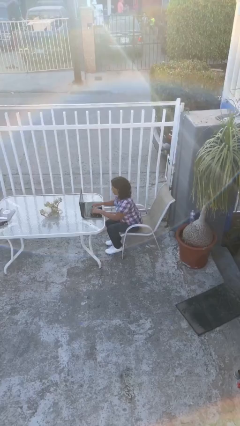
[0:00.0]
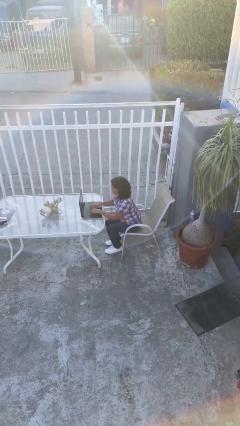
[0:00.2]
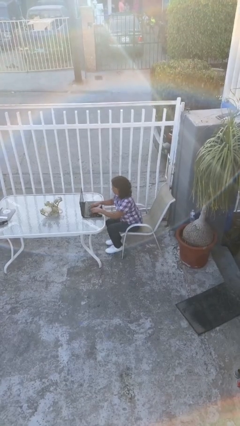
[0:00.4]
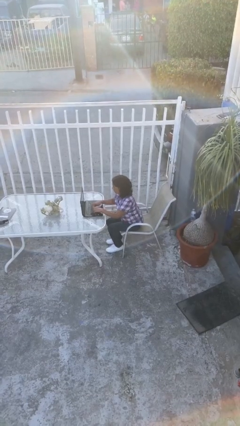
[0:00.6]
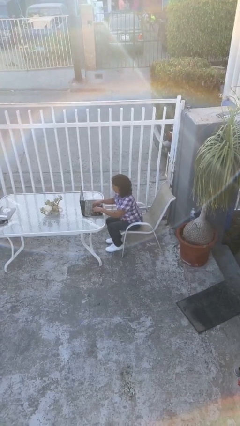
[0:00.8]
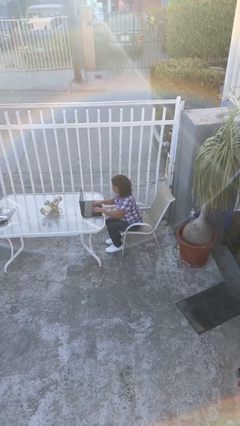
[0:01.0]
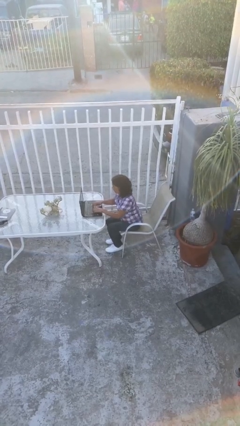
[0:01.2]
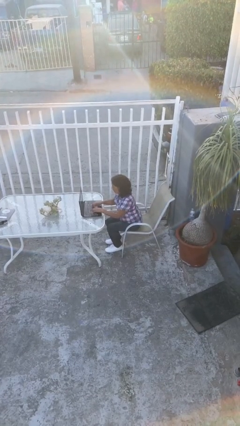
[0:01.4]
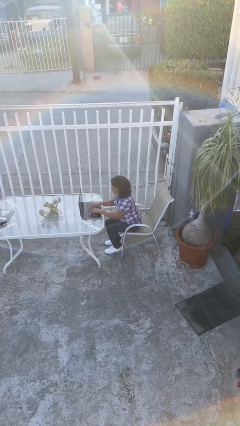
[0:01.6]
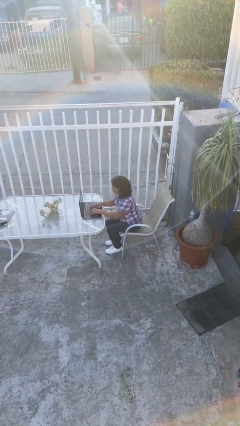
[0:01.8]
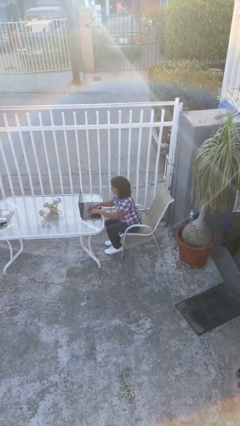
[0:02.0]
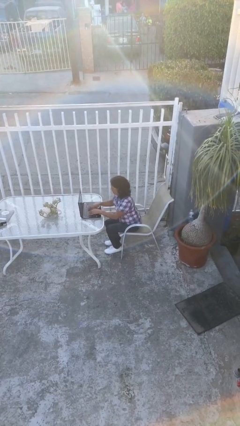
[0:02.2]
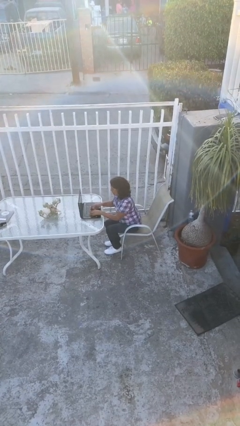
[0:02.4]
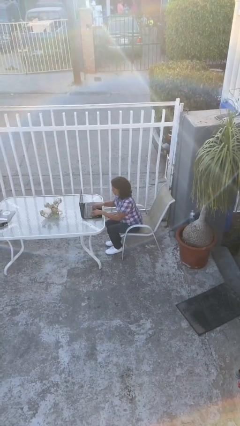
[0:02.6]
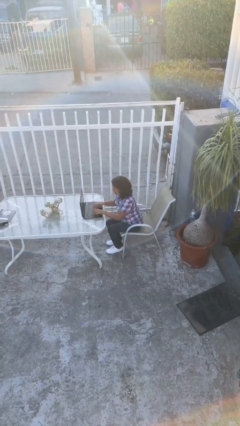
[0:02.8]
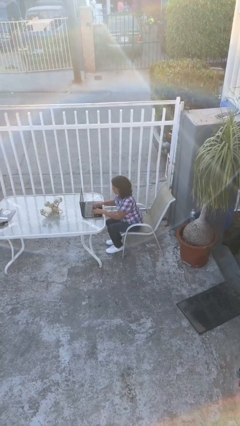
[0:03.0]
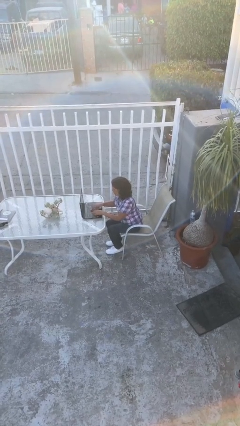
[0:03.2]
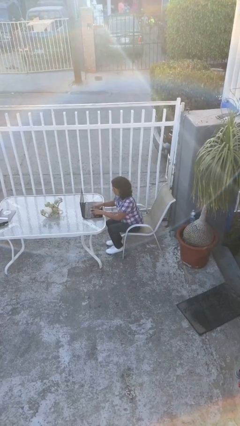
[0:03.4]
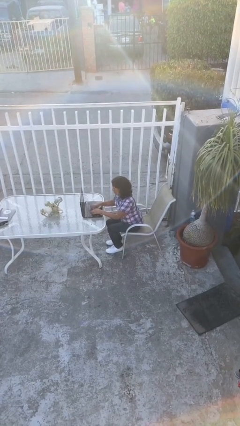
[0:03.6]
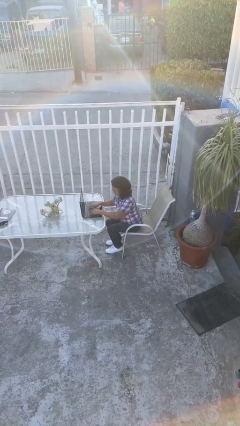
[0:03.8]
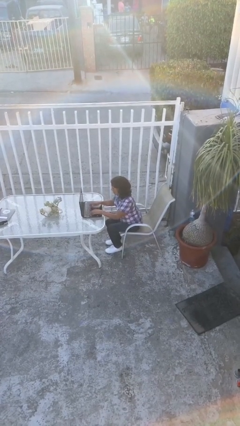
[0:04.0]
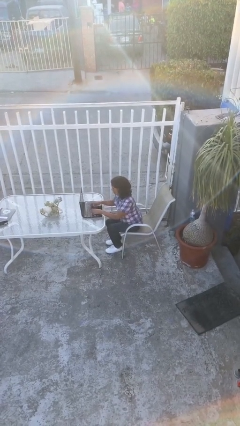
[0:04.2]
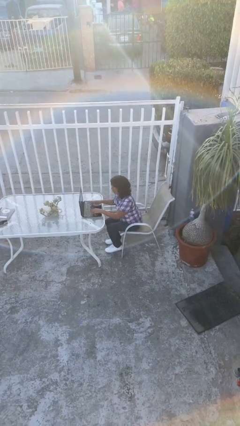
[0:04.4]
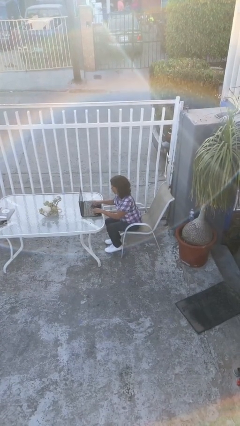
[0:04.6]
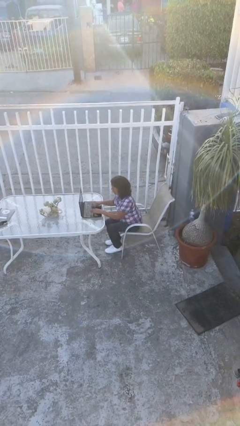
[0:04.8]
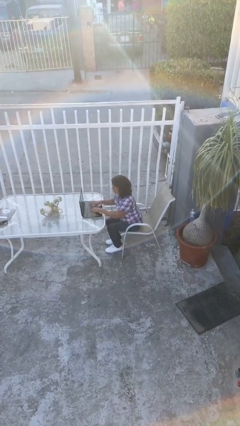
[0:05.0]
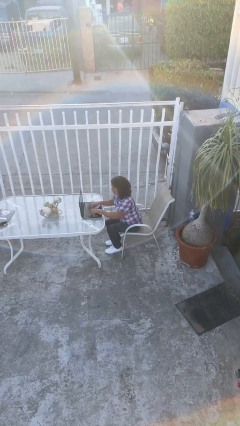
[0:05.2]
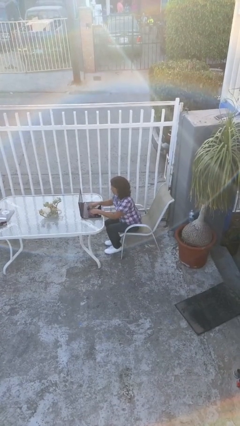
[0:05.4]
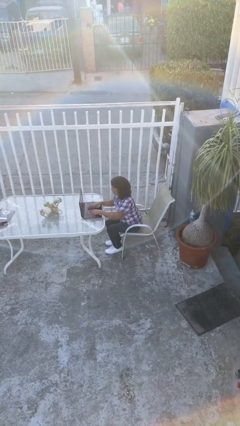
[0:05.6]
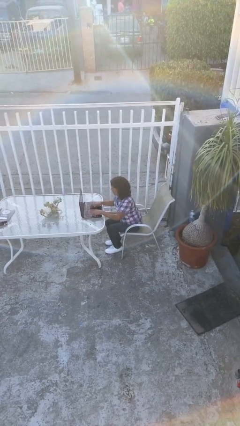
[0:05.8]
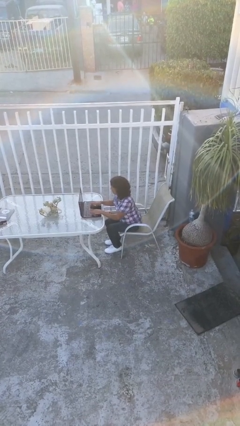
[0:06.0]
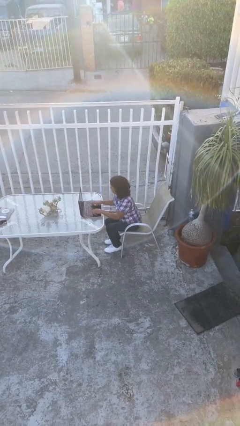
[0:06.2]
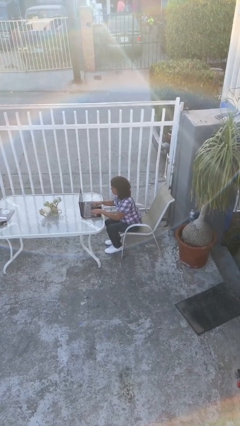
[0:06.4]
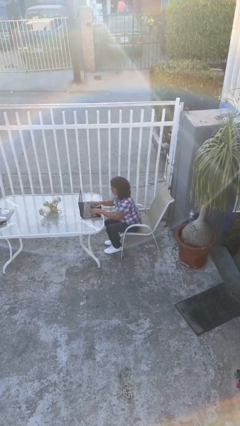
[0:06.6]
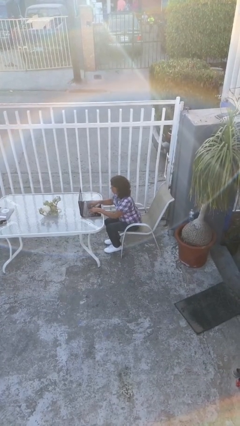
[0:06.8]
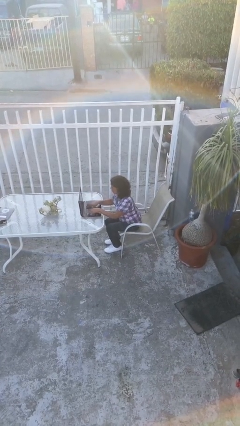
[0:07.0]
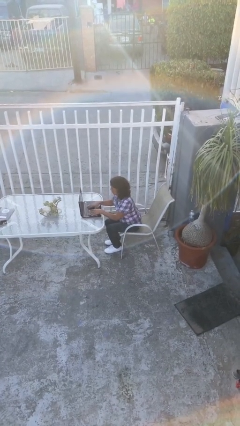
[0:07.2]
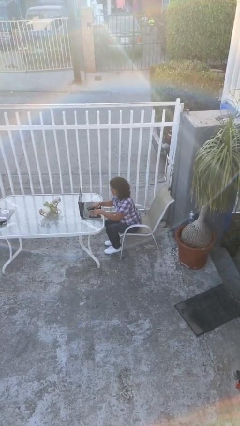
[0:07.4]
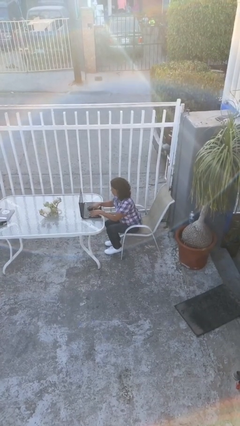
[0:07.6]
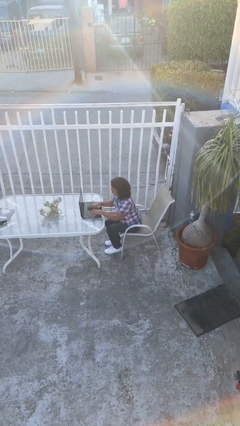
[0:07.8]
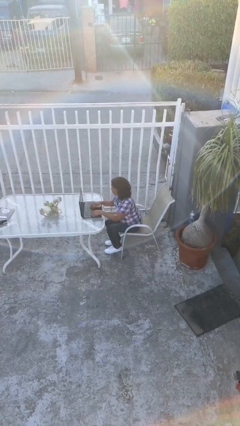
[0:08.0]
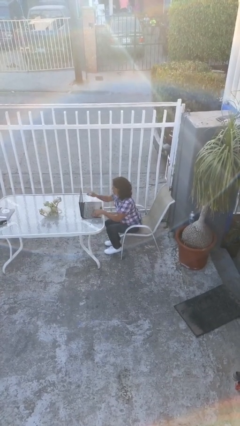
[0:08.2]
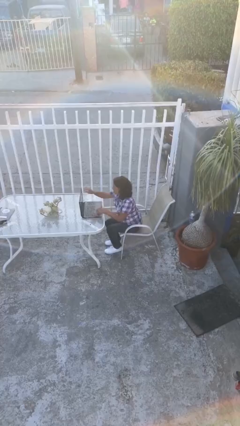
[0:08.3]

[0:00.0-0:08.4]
person interacts with laptop

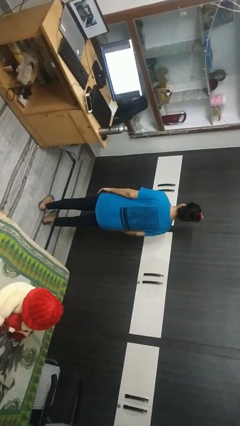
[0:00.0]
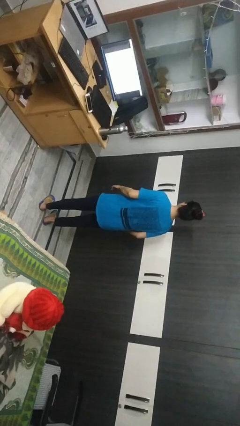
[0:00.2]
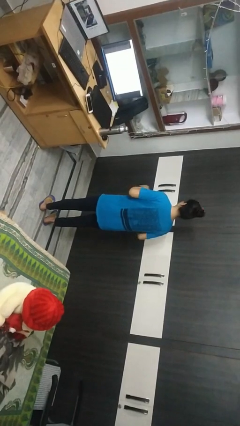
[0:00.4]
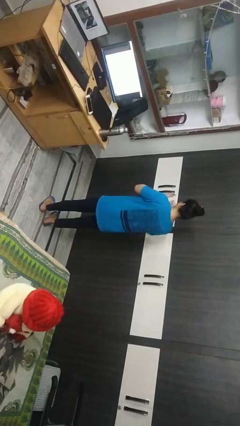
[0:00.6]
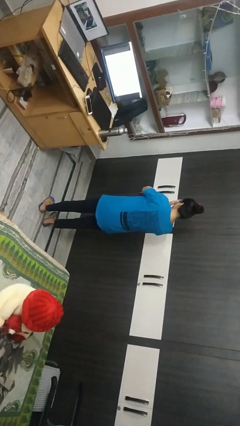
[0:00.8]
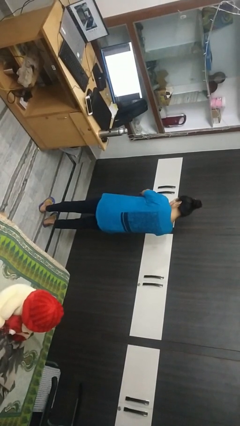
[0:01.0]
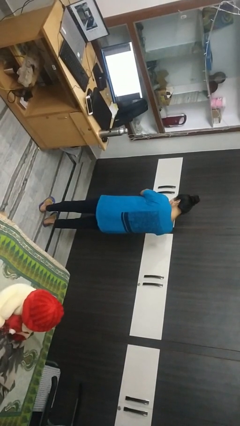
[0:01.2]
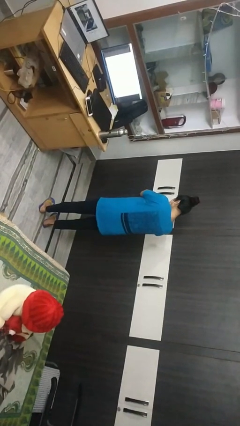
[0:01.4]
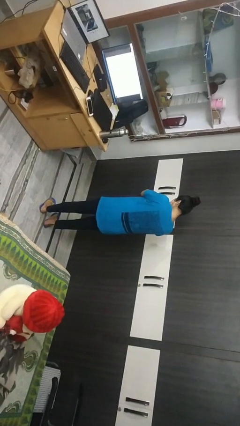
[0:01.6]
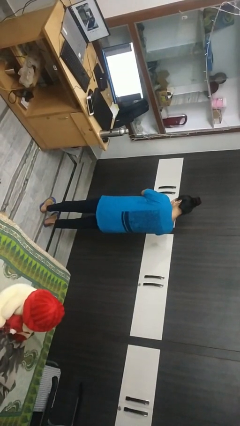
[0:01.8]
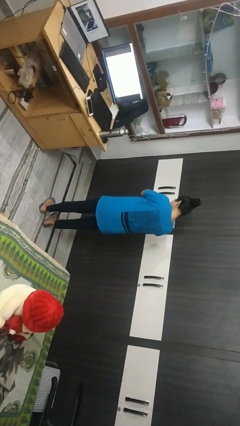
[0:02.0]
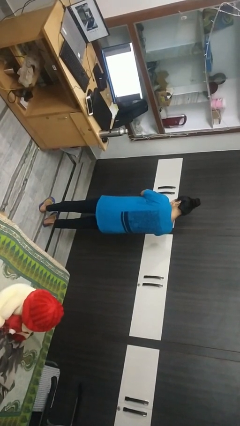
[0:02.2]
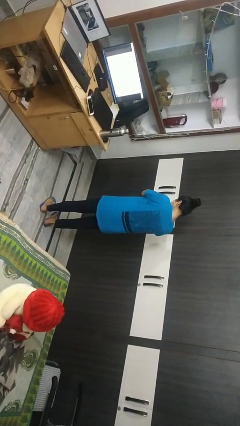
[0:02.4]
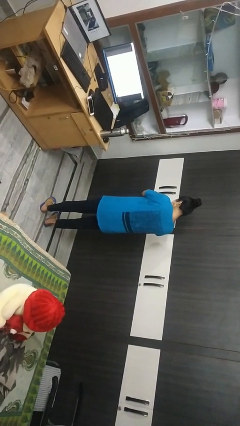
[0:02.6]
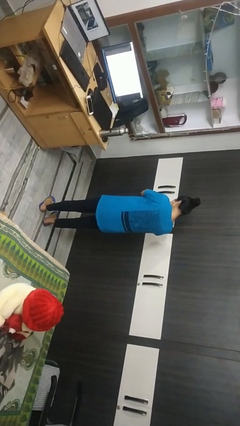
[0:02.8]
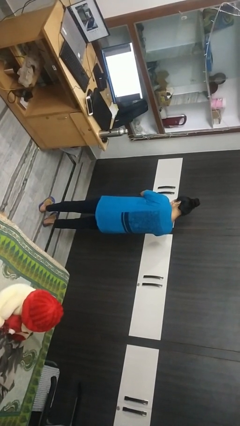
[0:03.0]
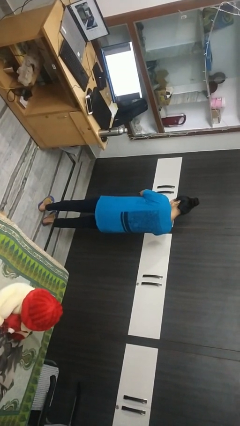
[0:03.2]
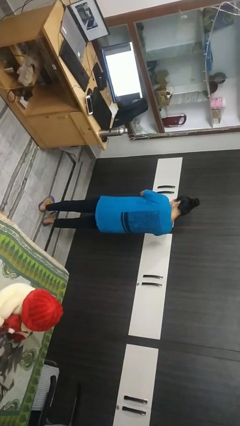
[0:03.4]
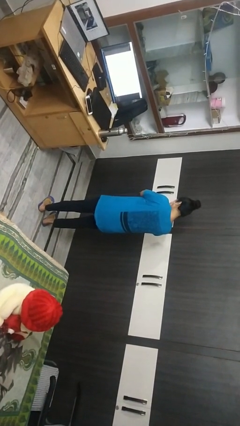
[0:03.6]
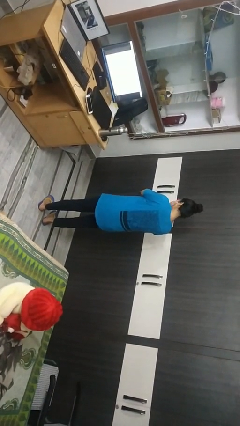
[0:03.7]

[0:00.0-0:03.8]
person covers face with hands

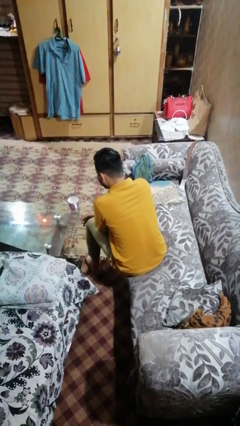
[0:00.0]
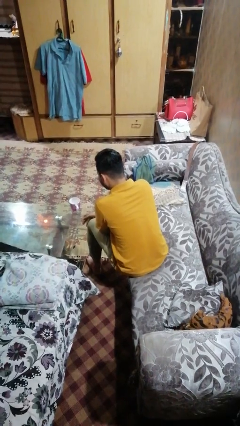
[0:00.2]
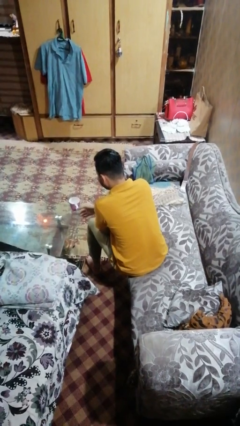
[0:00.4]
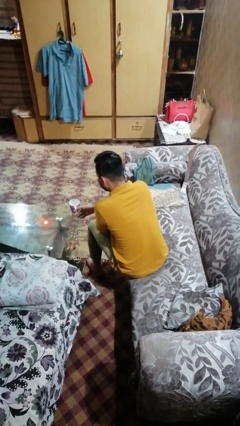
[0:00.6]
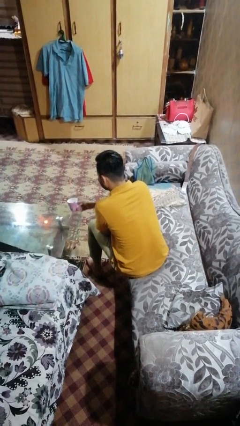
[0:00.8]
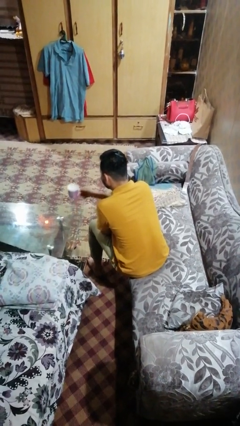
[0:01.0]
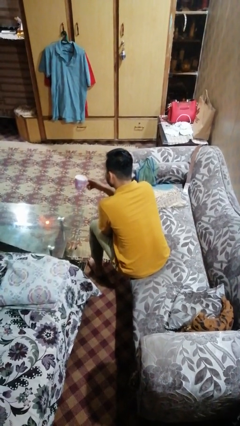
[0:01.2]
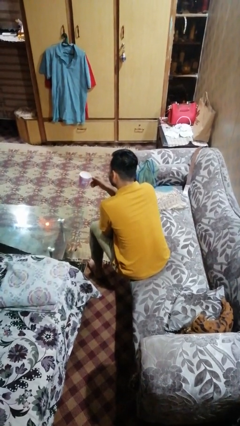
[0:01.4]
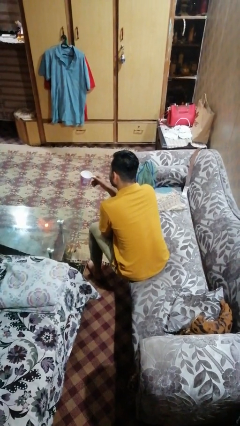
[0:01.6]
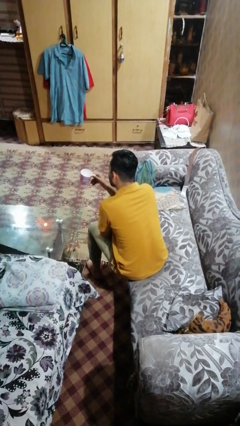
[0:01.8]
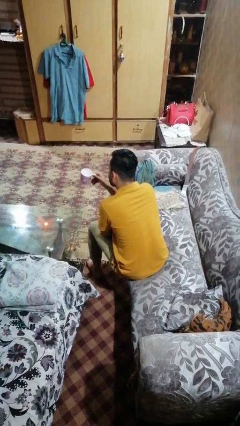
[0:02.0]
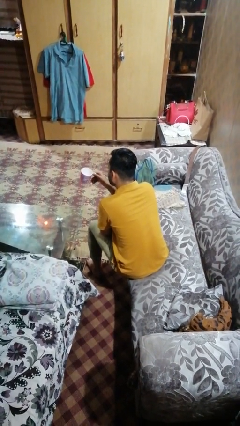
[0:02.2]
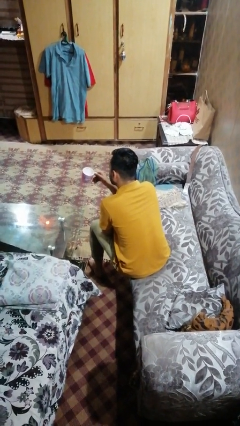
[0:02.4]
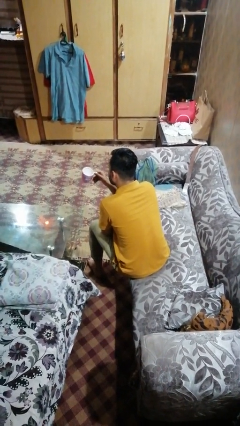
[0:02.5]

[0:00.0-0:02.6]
person picks up object from table

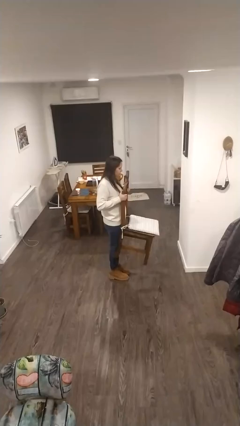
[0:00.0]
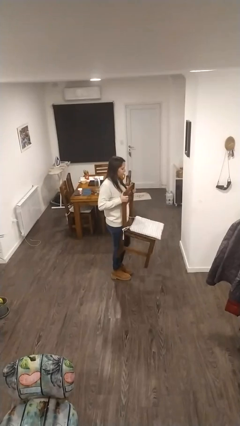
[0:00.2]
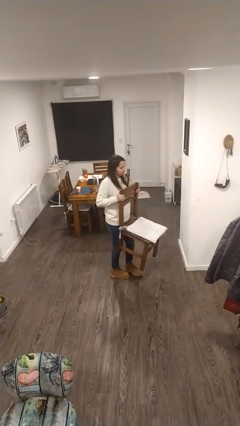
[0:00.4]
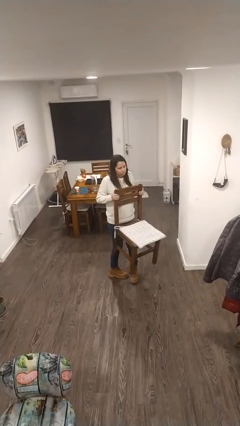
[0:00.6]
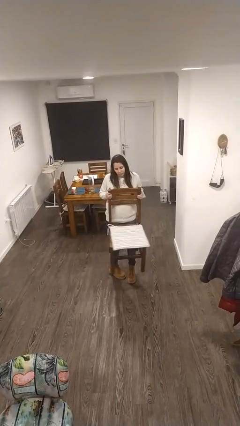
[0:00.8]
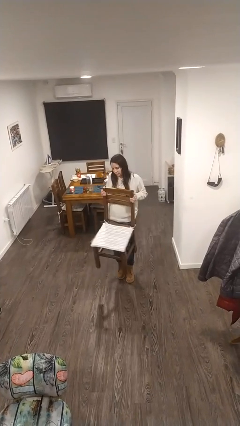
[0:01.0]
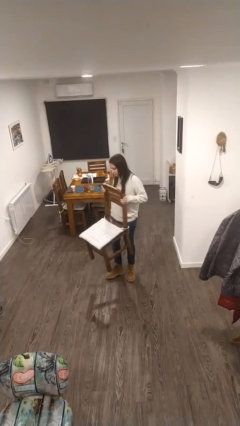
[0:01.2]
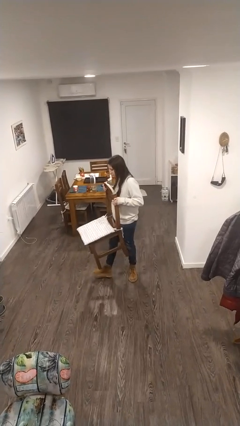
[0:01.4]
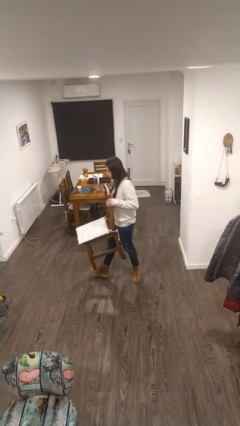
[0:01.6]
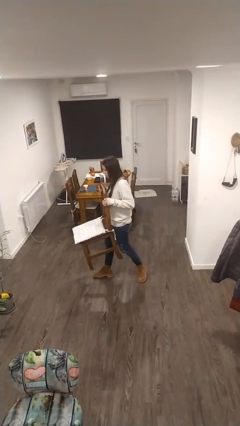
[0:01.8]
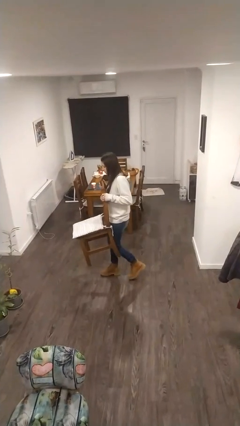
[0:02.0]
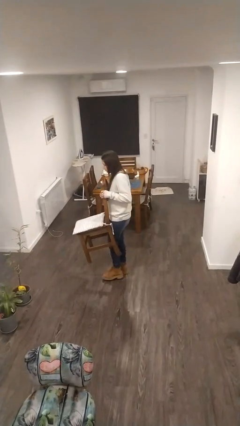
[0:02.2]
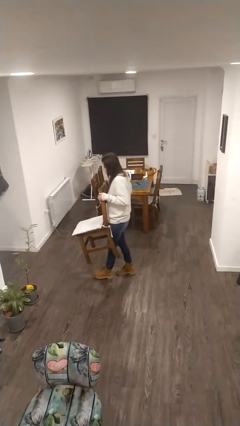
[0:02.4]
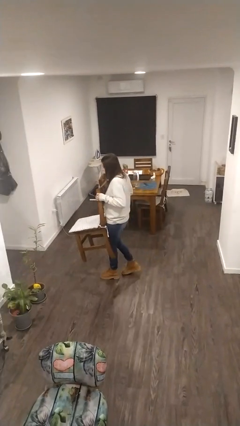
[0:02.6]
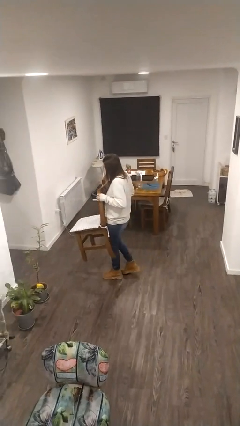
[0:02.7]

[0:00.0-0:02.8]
person carries furniture
